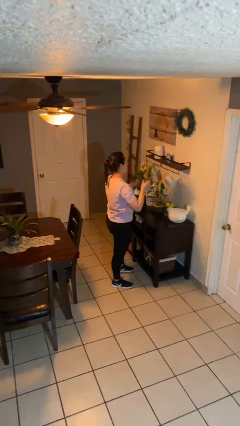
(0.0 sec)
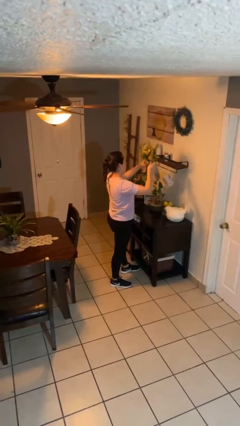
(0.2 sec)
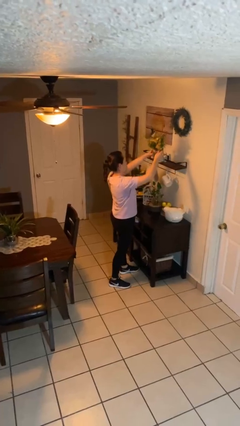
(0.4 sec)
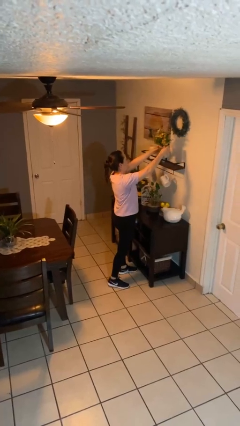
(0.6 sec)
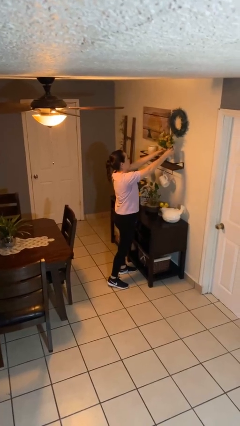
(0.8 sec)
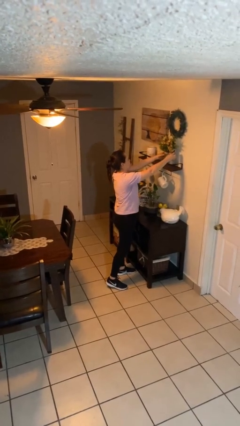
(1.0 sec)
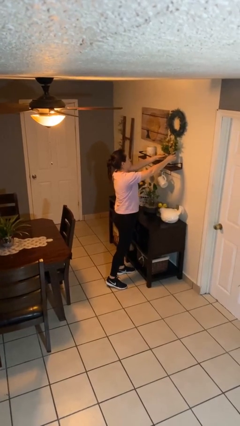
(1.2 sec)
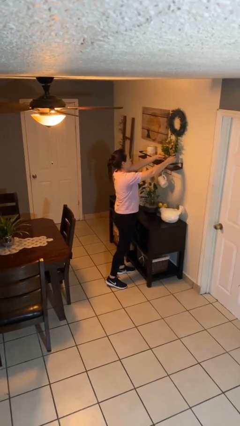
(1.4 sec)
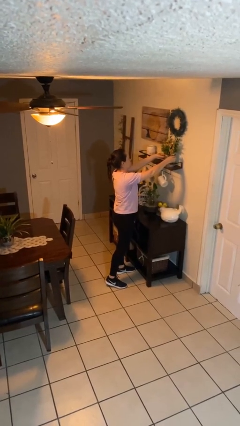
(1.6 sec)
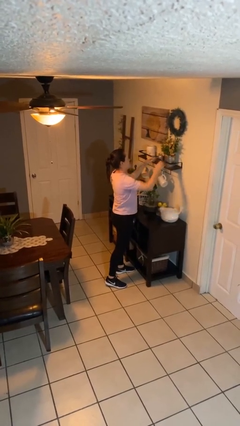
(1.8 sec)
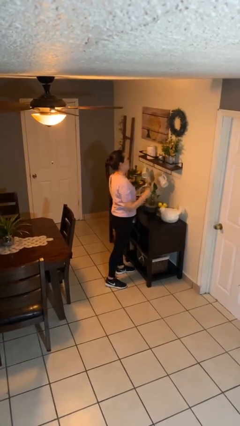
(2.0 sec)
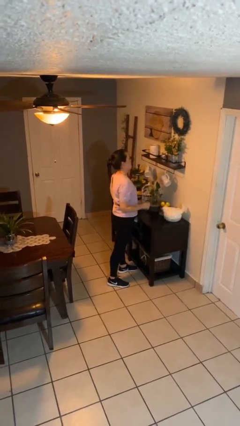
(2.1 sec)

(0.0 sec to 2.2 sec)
person puts down object on countertop

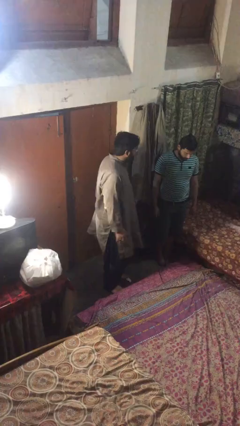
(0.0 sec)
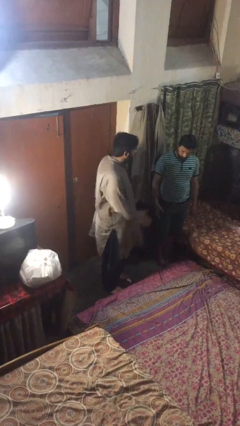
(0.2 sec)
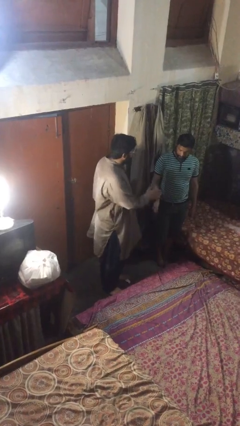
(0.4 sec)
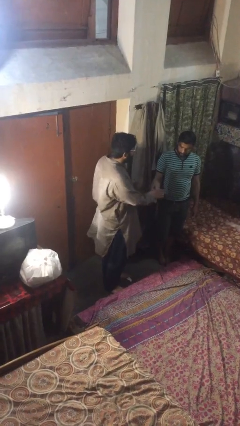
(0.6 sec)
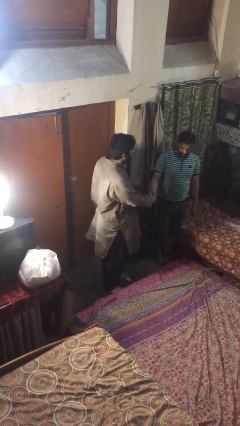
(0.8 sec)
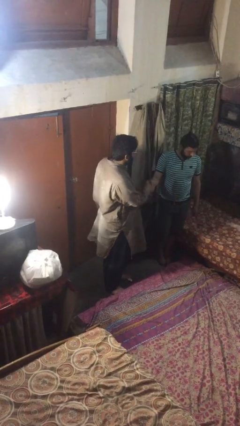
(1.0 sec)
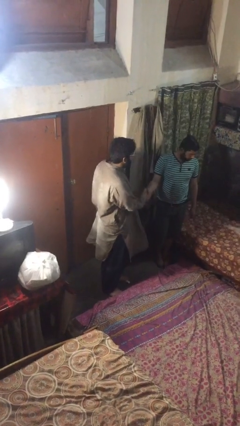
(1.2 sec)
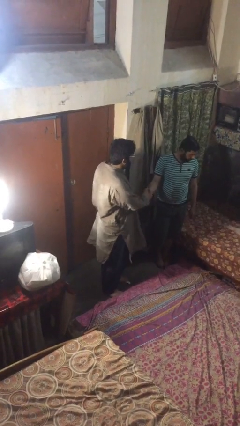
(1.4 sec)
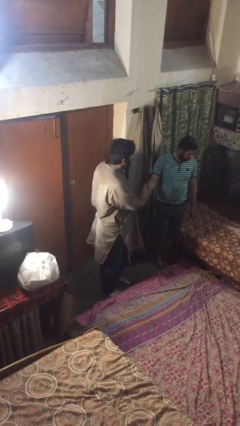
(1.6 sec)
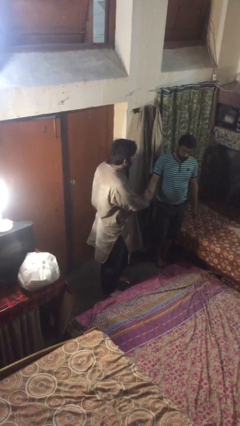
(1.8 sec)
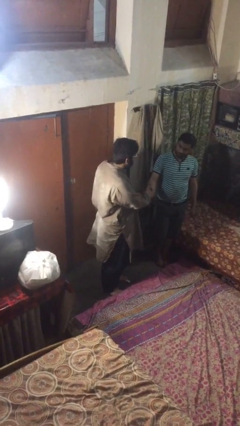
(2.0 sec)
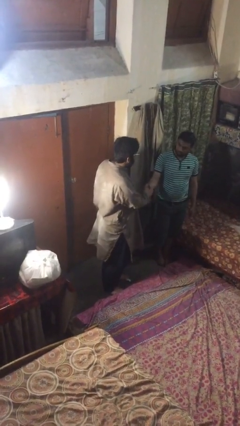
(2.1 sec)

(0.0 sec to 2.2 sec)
person shakes hand

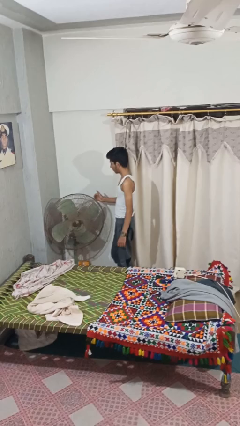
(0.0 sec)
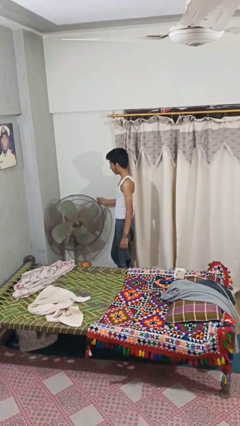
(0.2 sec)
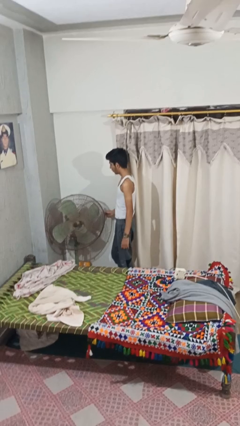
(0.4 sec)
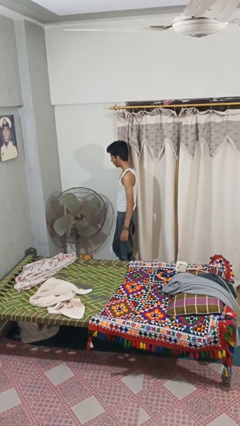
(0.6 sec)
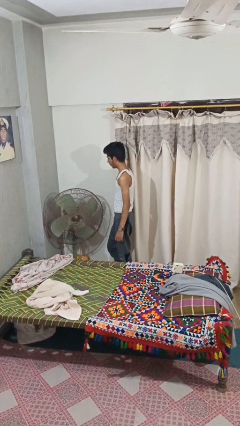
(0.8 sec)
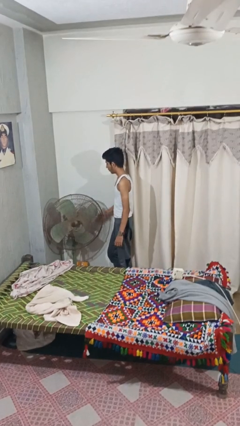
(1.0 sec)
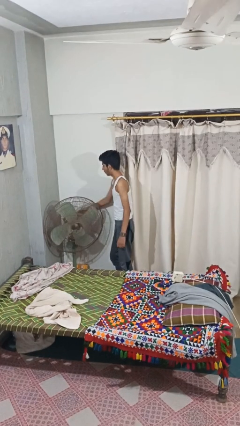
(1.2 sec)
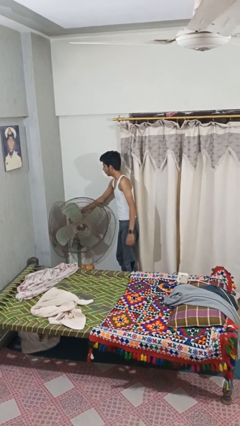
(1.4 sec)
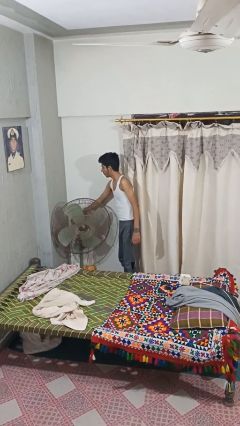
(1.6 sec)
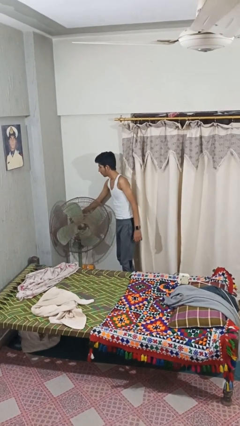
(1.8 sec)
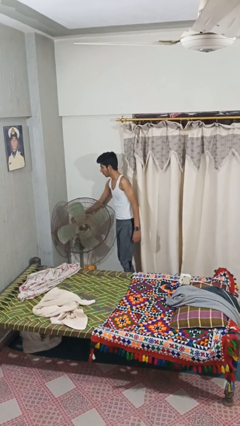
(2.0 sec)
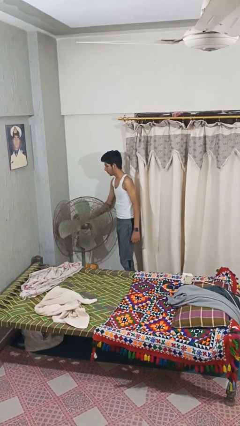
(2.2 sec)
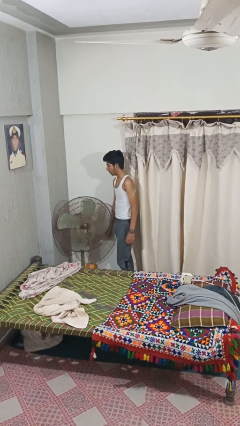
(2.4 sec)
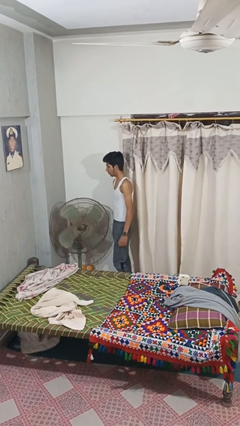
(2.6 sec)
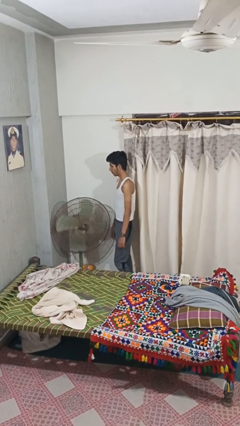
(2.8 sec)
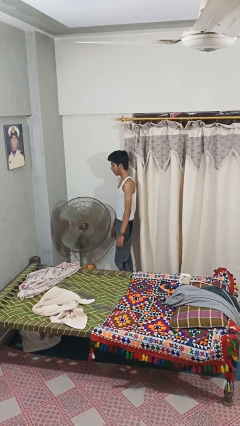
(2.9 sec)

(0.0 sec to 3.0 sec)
person turns on fan

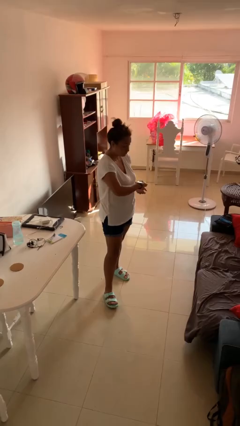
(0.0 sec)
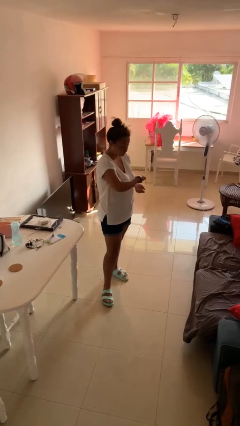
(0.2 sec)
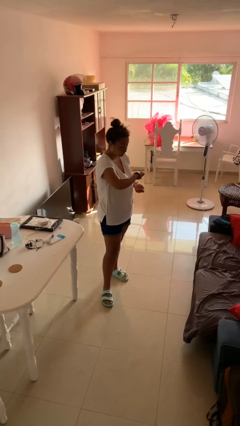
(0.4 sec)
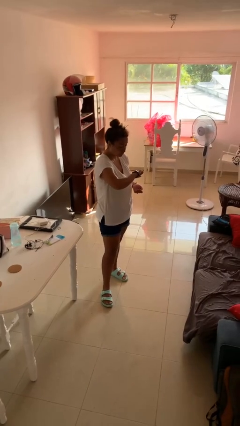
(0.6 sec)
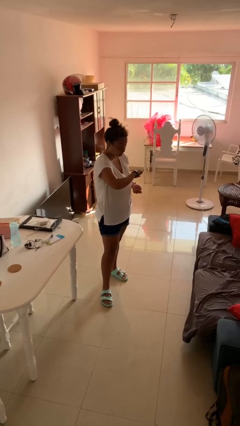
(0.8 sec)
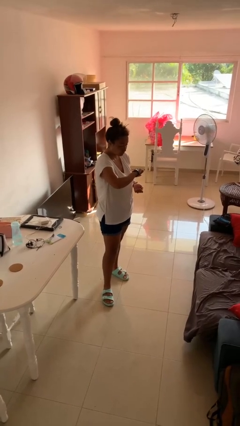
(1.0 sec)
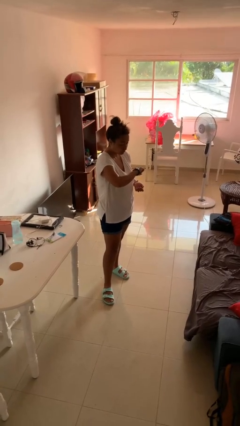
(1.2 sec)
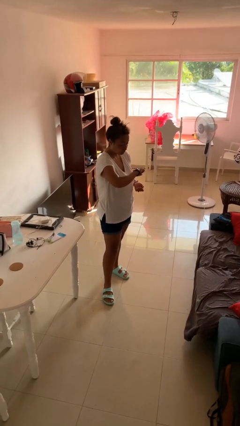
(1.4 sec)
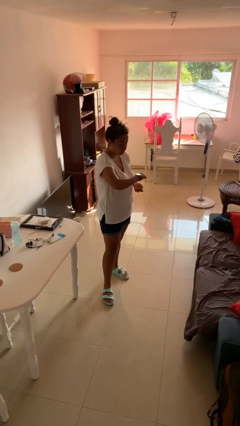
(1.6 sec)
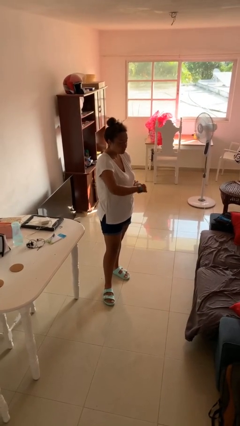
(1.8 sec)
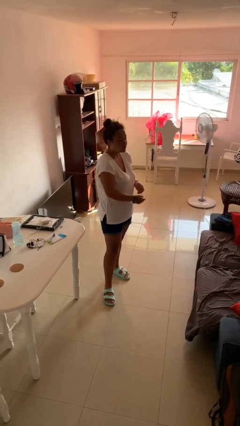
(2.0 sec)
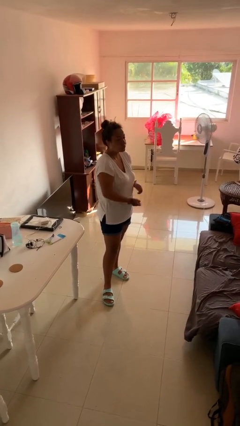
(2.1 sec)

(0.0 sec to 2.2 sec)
person looks at wristwatch

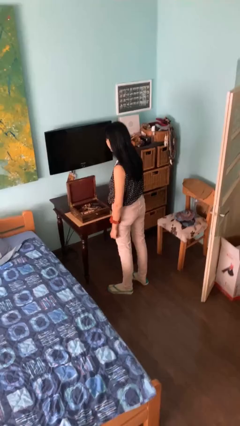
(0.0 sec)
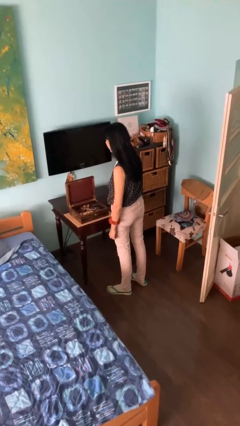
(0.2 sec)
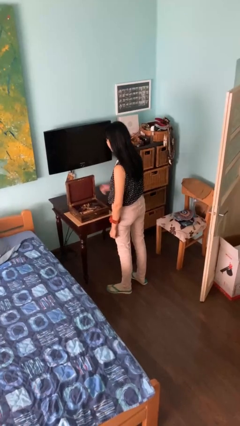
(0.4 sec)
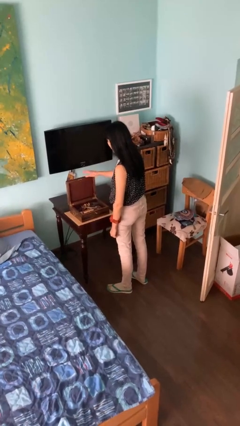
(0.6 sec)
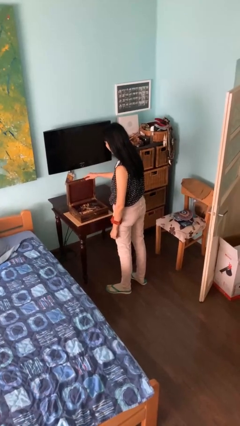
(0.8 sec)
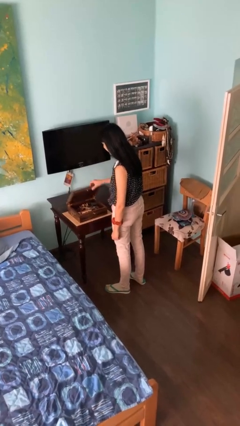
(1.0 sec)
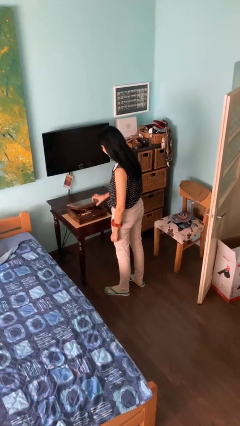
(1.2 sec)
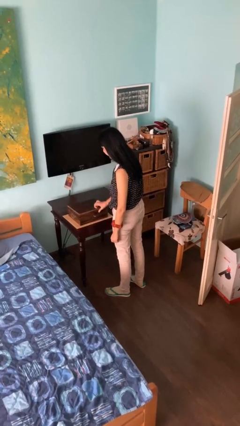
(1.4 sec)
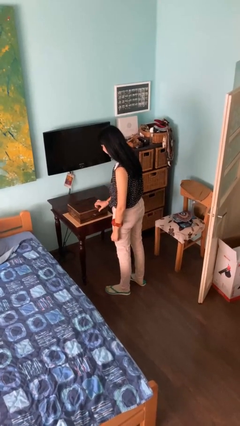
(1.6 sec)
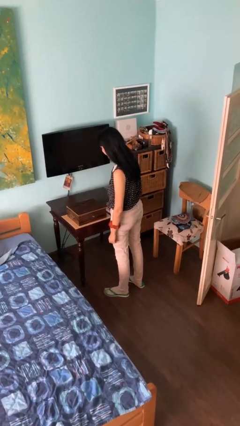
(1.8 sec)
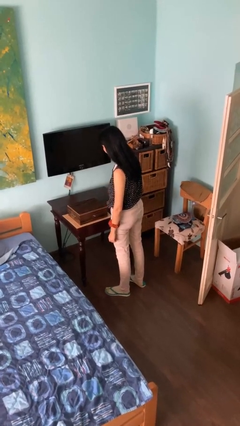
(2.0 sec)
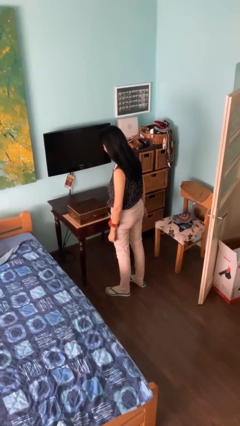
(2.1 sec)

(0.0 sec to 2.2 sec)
person closes jewelry box

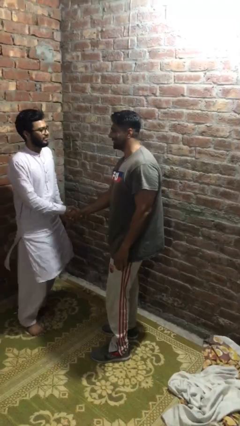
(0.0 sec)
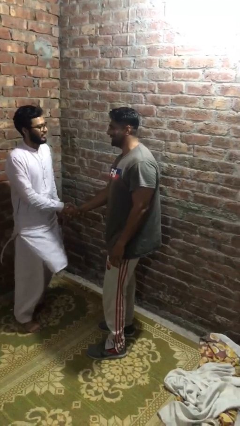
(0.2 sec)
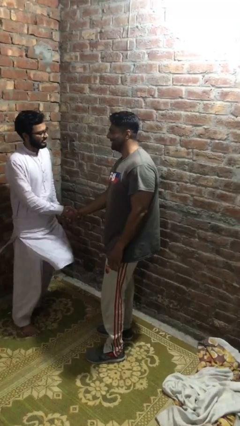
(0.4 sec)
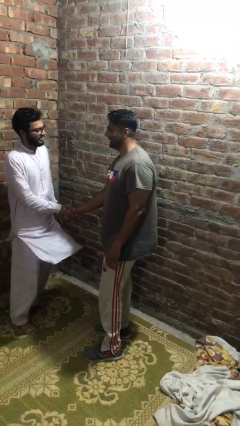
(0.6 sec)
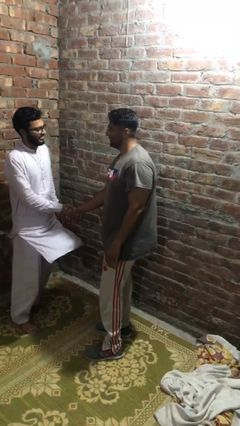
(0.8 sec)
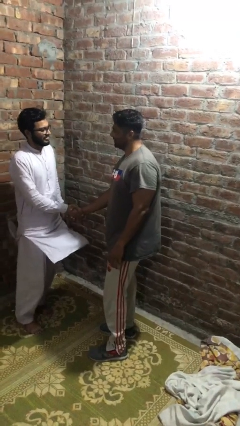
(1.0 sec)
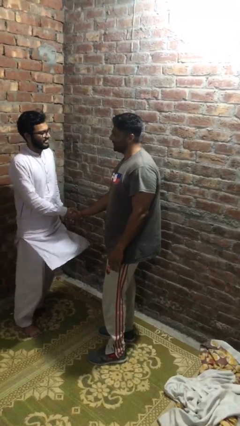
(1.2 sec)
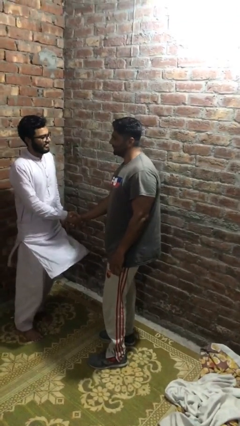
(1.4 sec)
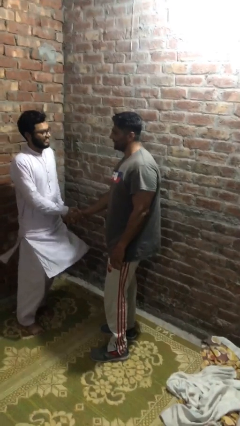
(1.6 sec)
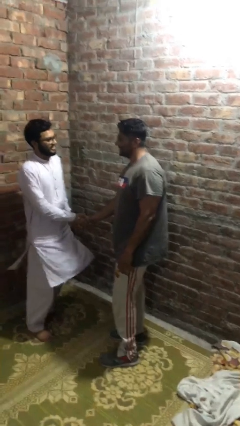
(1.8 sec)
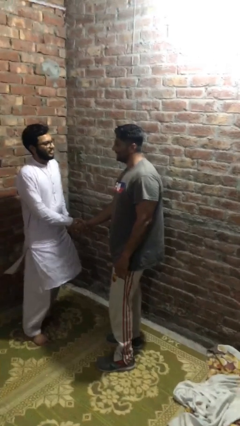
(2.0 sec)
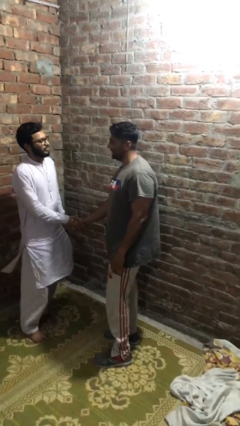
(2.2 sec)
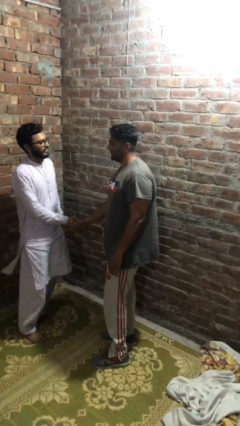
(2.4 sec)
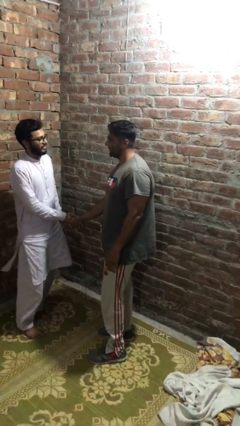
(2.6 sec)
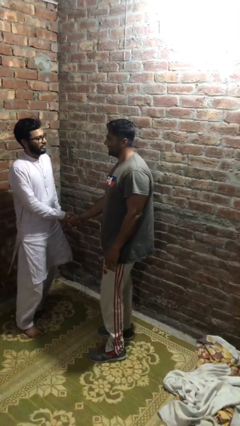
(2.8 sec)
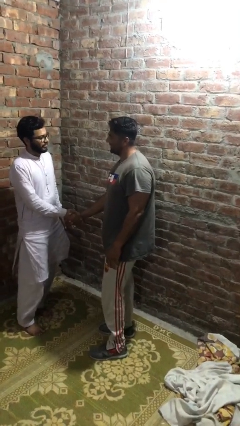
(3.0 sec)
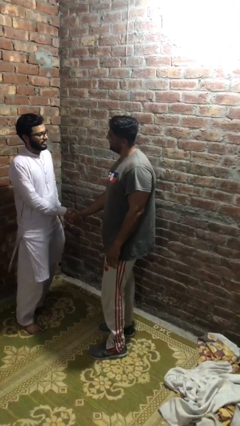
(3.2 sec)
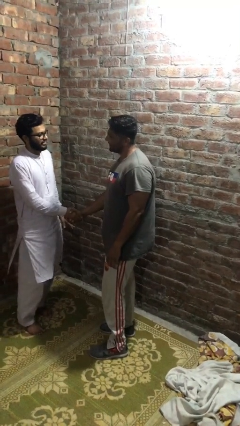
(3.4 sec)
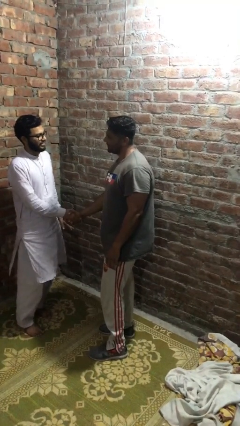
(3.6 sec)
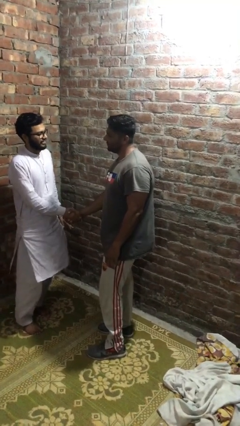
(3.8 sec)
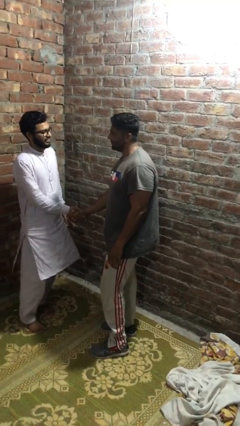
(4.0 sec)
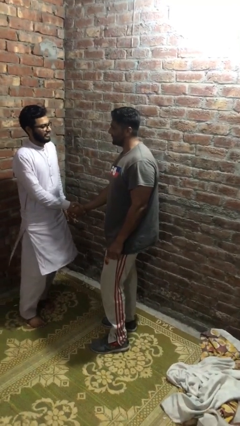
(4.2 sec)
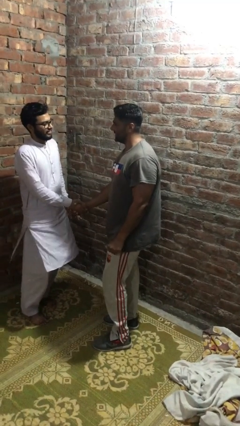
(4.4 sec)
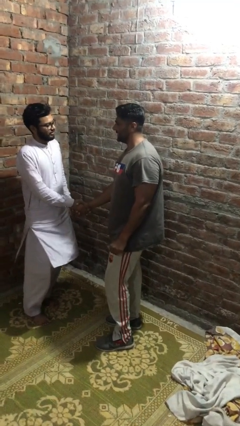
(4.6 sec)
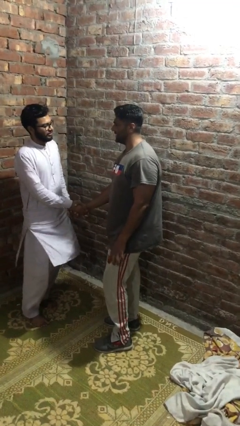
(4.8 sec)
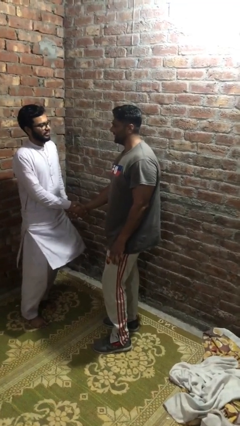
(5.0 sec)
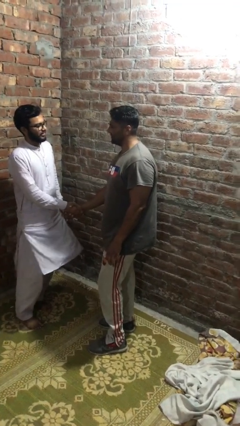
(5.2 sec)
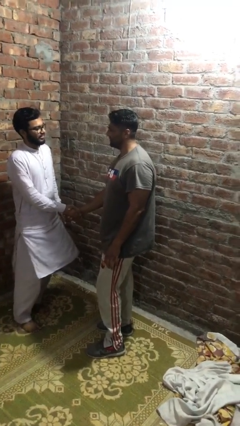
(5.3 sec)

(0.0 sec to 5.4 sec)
person talks to person

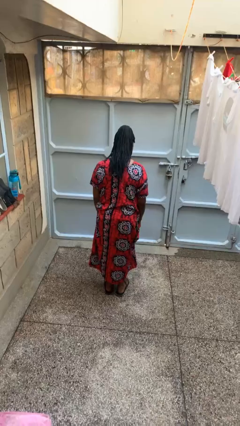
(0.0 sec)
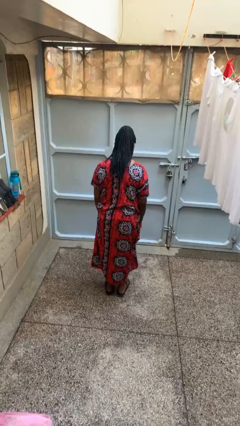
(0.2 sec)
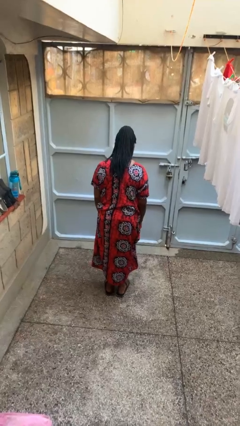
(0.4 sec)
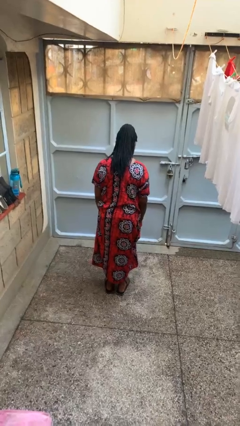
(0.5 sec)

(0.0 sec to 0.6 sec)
person walks tiptoe
